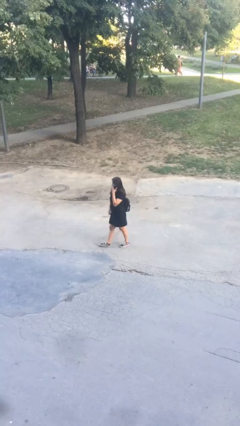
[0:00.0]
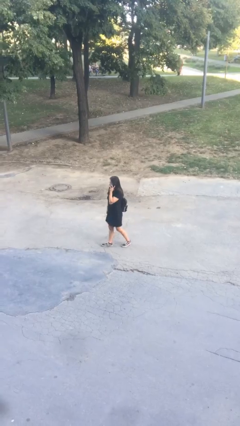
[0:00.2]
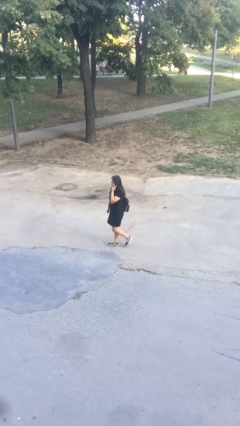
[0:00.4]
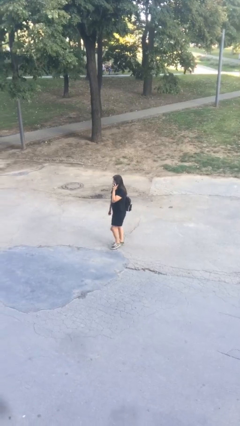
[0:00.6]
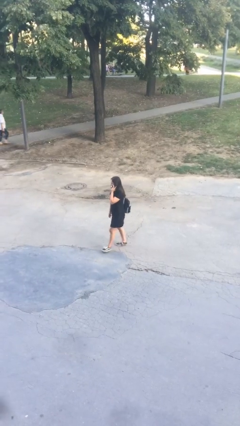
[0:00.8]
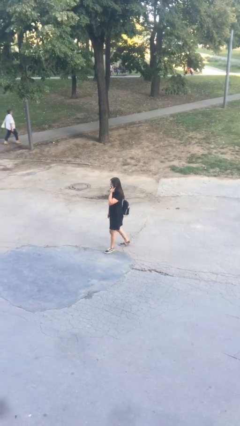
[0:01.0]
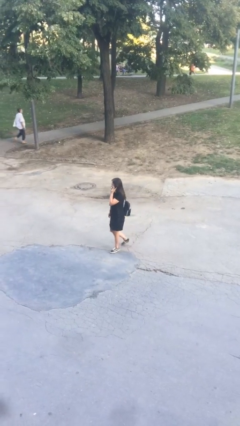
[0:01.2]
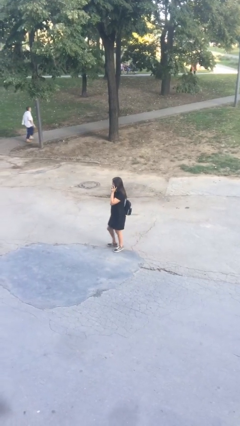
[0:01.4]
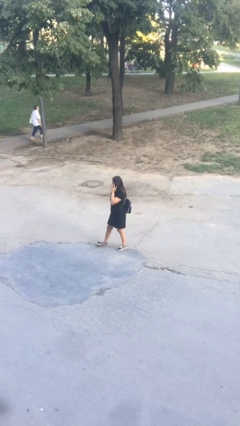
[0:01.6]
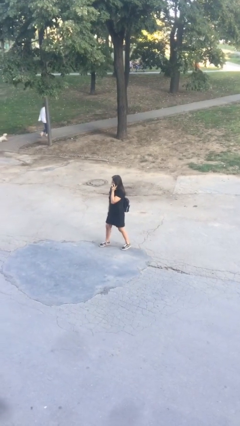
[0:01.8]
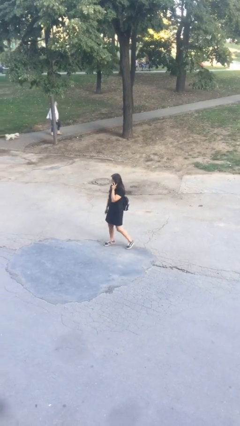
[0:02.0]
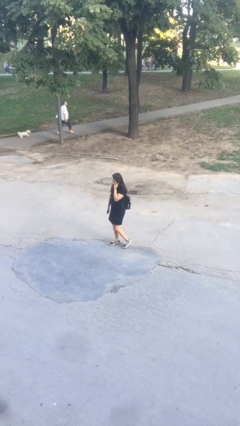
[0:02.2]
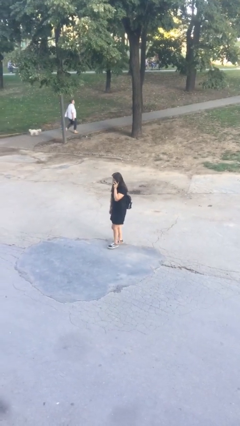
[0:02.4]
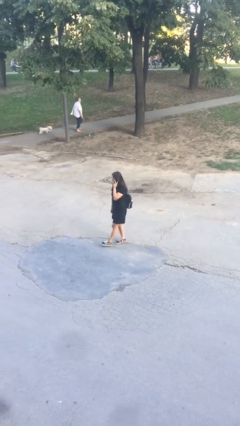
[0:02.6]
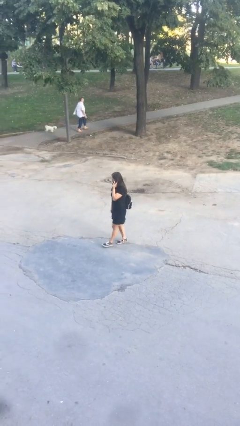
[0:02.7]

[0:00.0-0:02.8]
person talks on phone

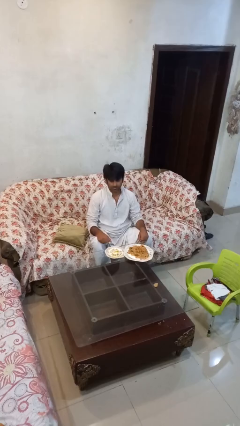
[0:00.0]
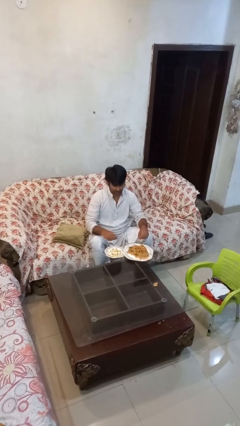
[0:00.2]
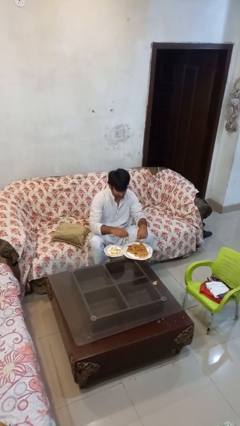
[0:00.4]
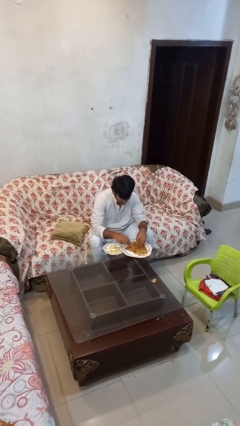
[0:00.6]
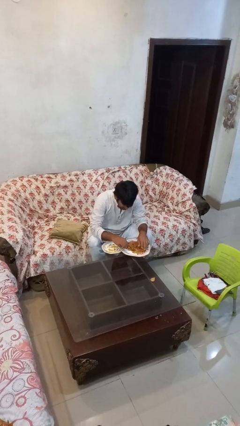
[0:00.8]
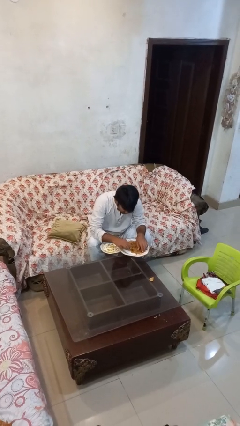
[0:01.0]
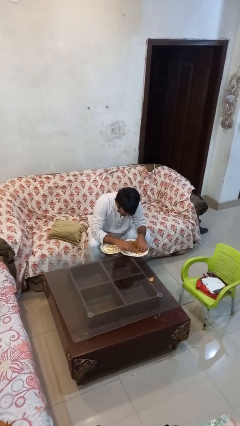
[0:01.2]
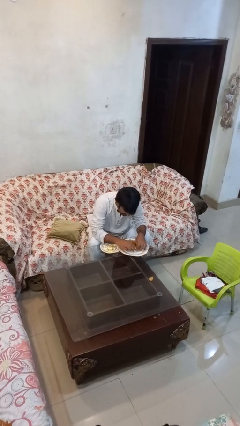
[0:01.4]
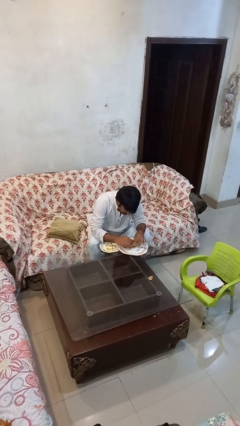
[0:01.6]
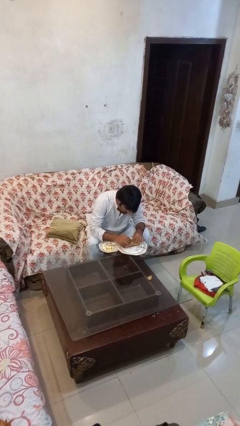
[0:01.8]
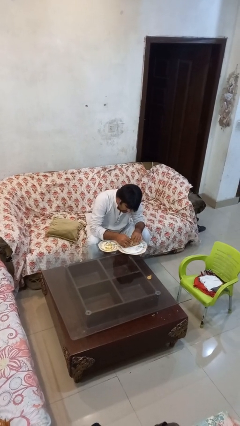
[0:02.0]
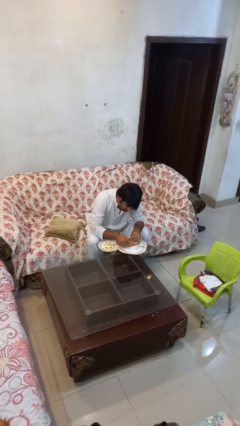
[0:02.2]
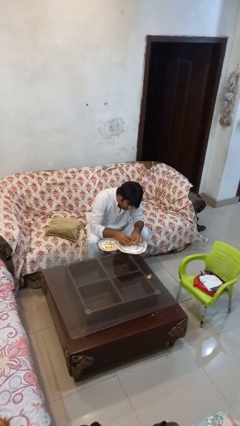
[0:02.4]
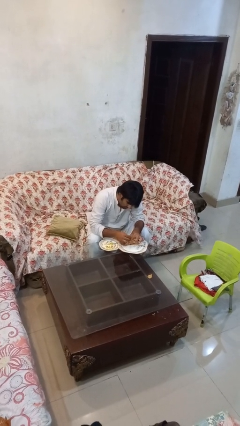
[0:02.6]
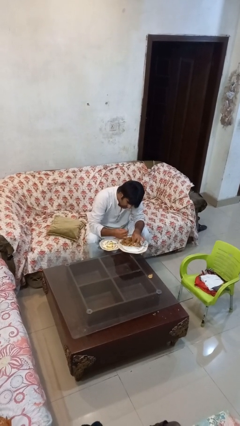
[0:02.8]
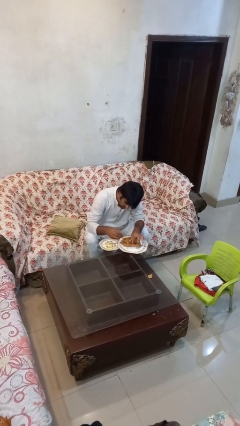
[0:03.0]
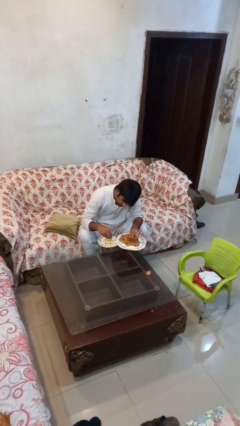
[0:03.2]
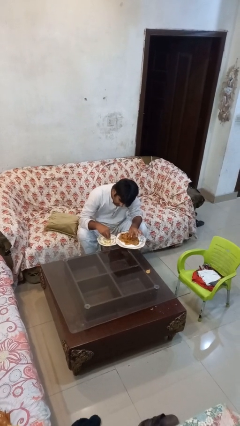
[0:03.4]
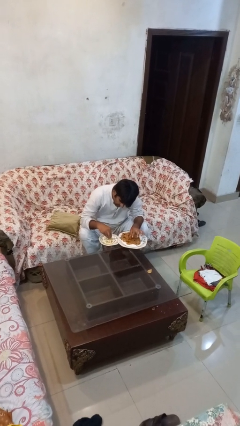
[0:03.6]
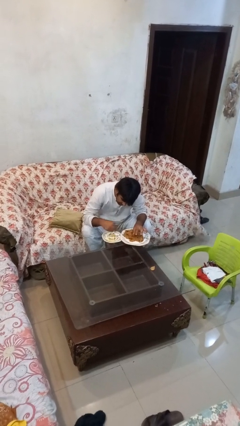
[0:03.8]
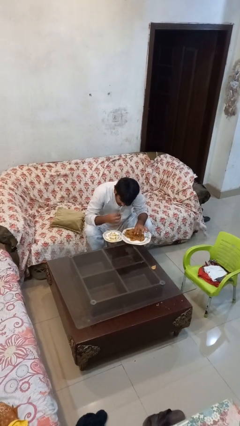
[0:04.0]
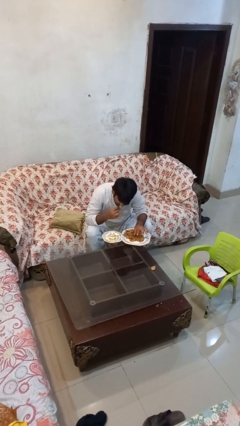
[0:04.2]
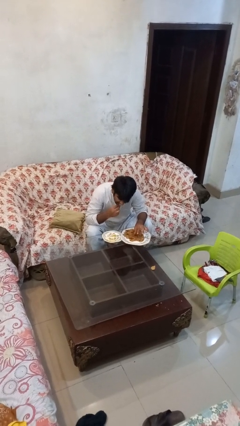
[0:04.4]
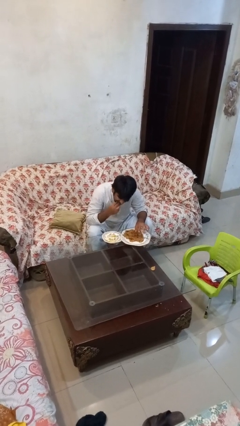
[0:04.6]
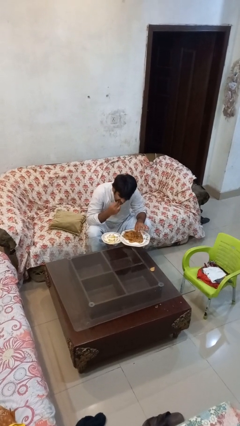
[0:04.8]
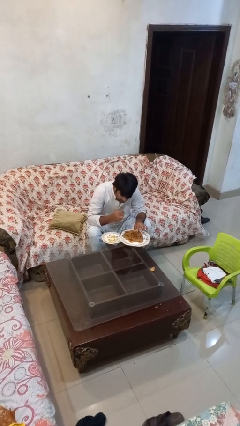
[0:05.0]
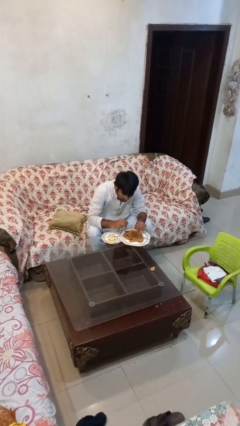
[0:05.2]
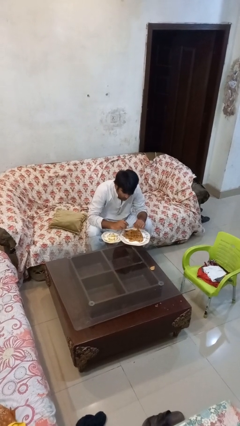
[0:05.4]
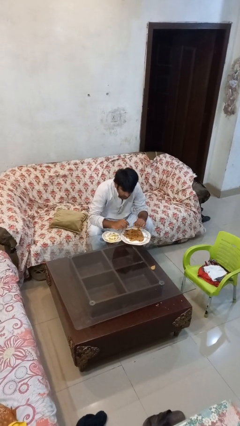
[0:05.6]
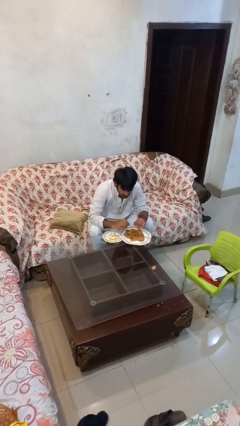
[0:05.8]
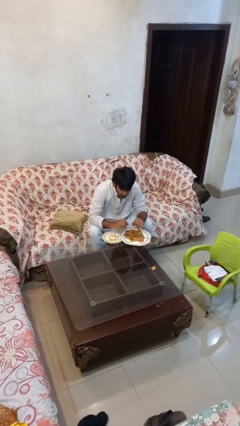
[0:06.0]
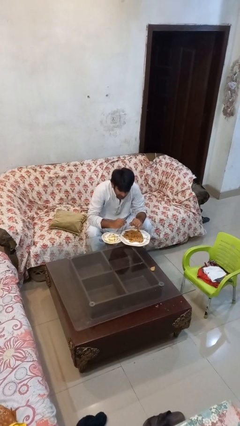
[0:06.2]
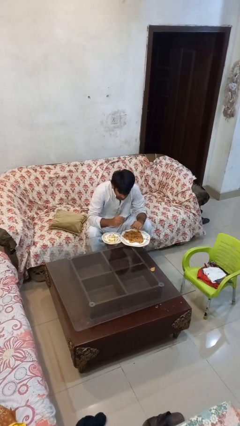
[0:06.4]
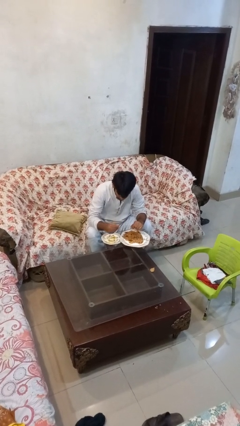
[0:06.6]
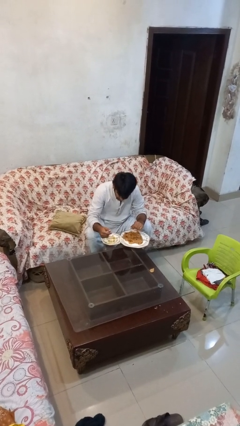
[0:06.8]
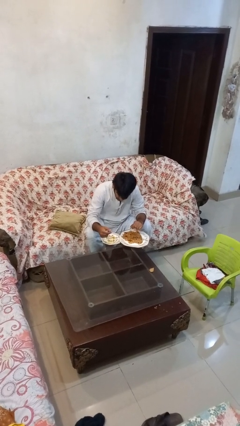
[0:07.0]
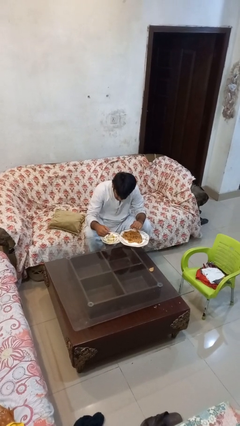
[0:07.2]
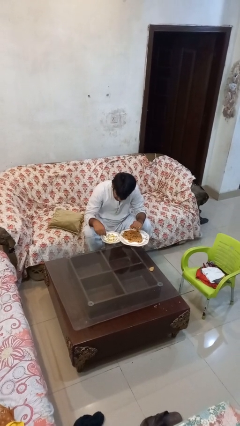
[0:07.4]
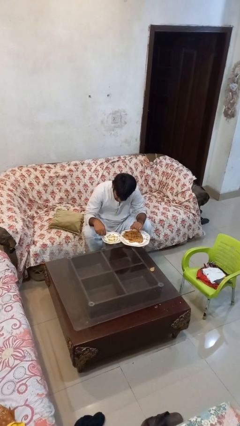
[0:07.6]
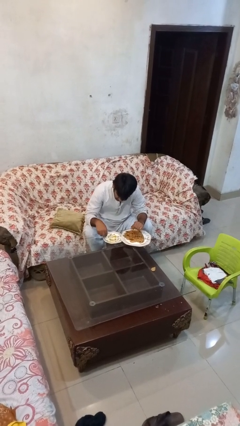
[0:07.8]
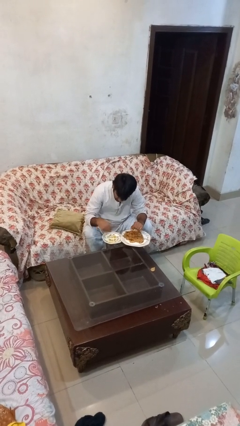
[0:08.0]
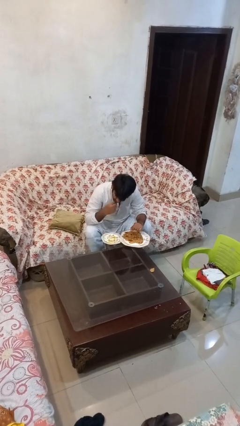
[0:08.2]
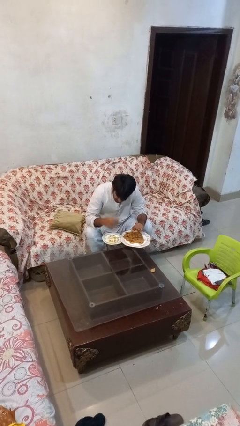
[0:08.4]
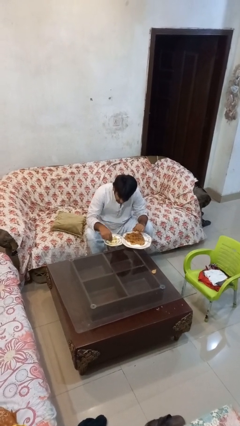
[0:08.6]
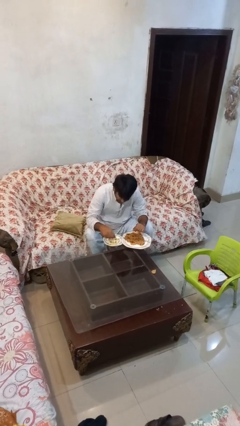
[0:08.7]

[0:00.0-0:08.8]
person eats with hands

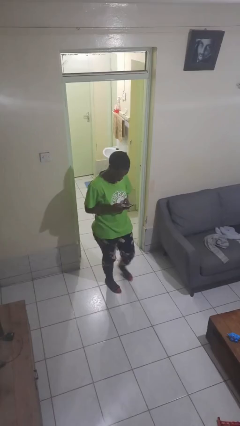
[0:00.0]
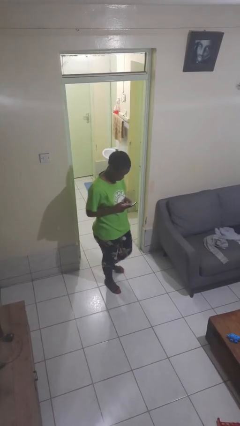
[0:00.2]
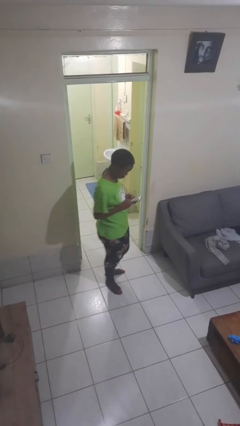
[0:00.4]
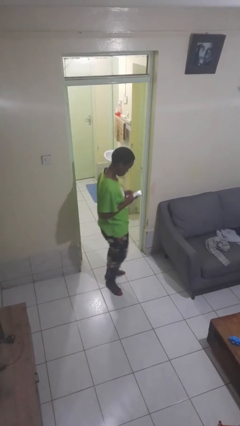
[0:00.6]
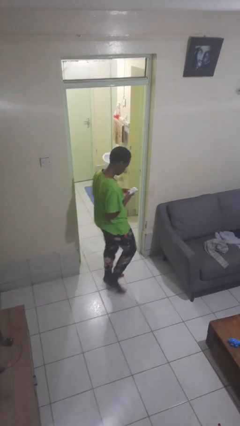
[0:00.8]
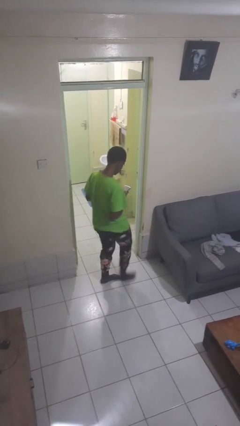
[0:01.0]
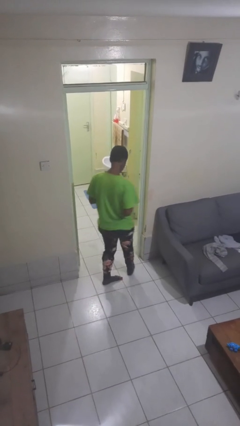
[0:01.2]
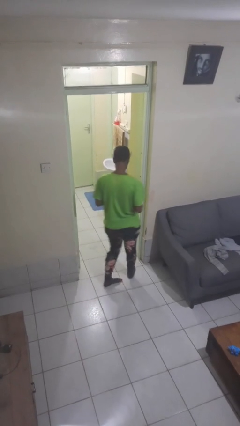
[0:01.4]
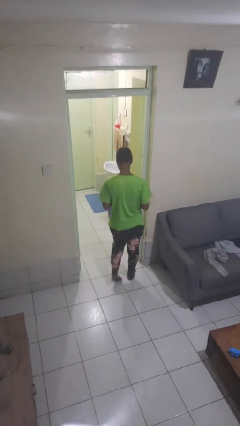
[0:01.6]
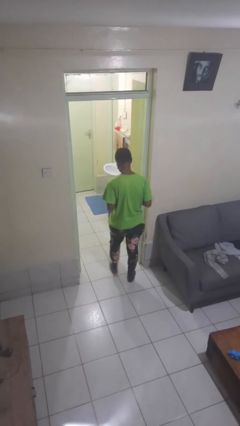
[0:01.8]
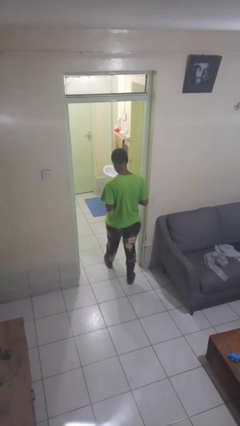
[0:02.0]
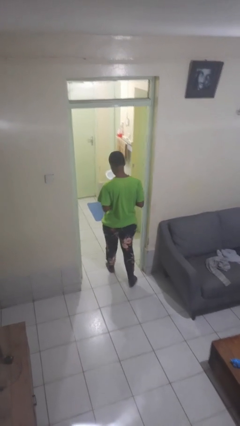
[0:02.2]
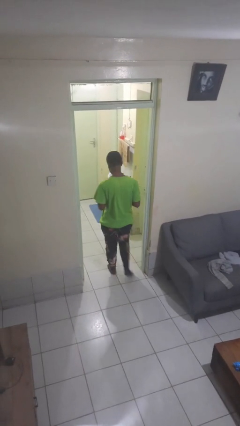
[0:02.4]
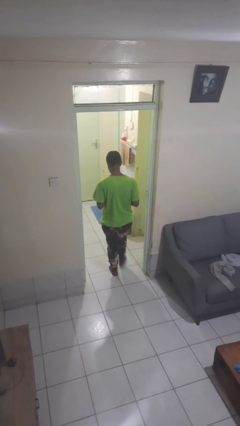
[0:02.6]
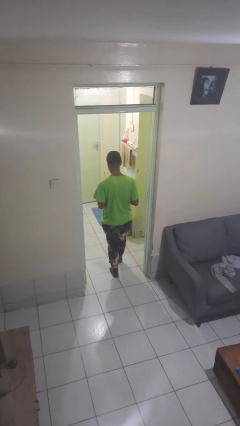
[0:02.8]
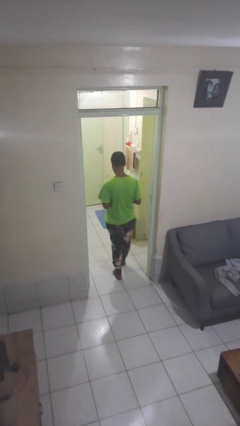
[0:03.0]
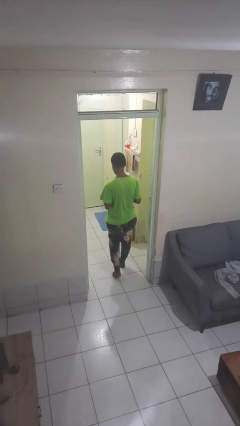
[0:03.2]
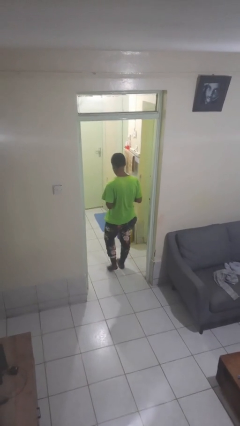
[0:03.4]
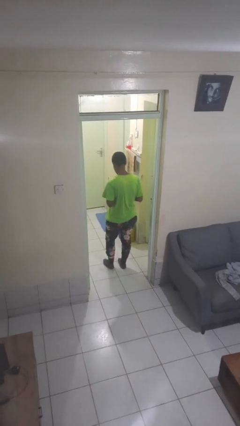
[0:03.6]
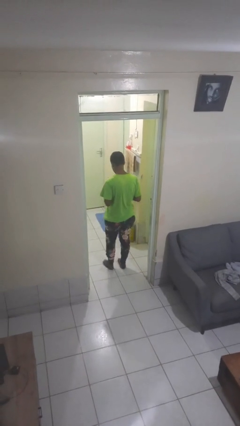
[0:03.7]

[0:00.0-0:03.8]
person exits scene through structure

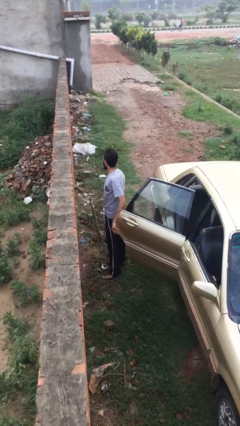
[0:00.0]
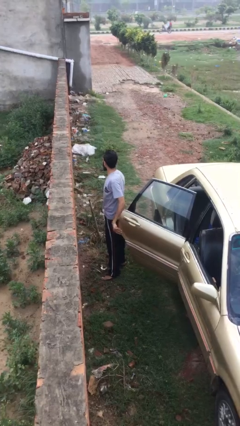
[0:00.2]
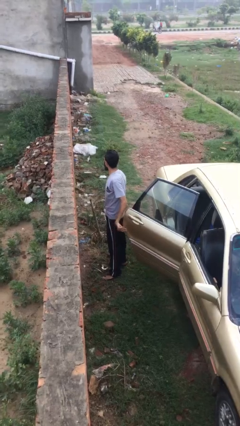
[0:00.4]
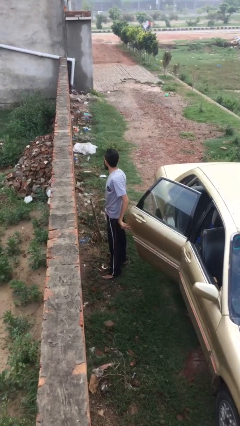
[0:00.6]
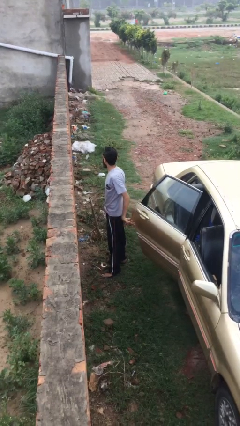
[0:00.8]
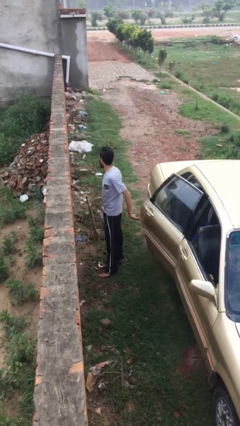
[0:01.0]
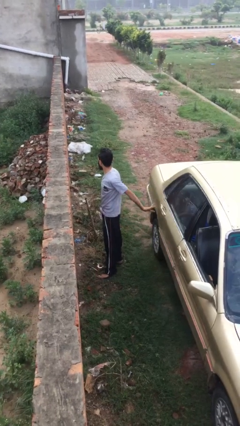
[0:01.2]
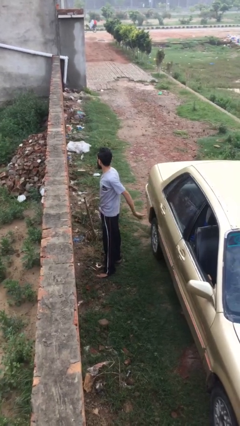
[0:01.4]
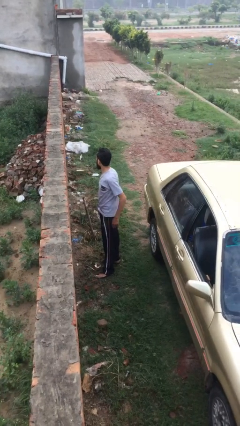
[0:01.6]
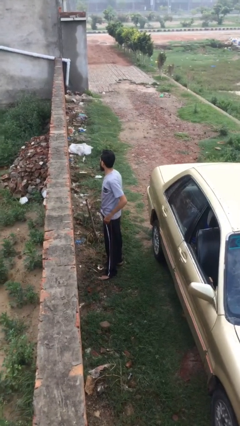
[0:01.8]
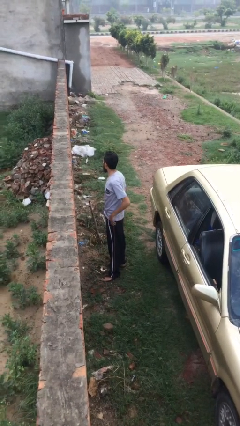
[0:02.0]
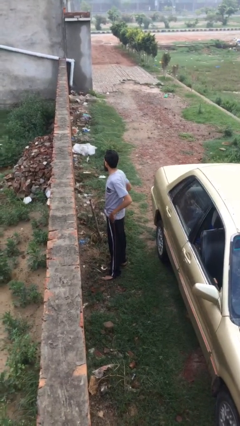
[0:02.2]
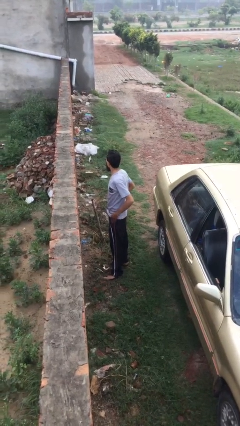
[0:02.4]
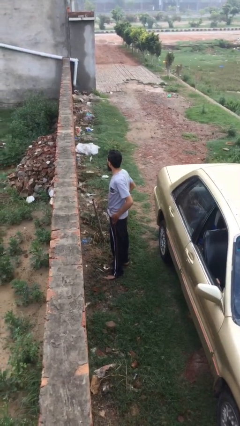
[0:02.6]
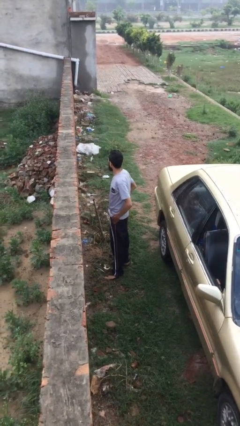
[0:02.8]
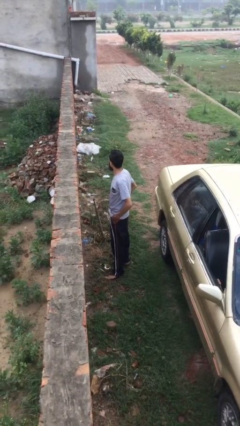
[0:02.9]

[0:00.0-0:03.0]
person closes car door
